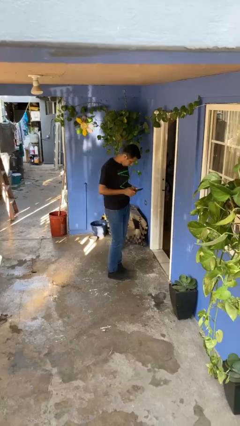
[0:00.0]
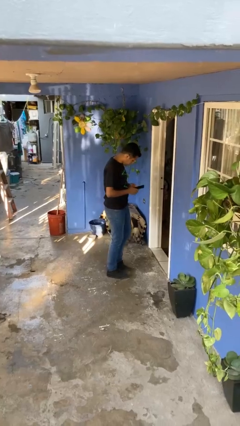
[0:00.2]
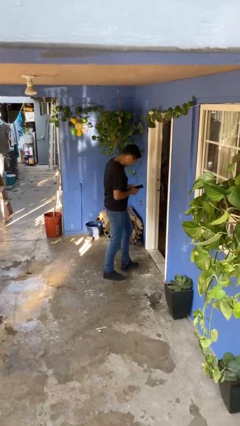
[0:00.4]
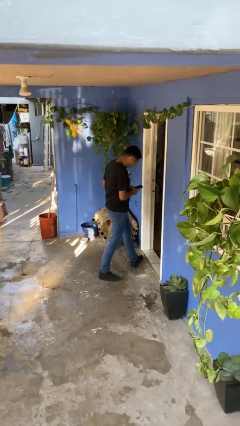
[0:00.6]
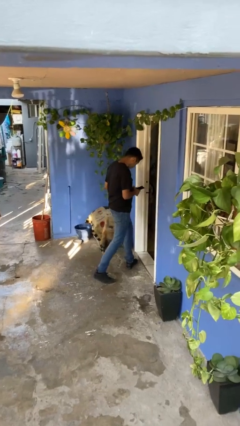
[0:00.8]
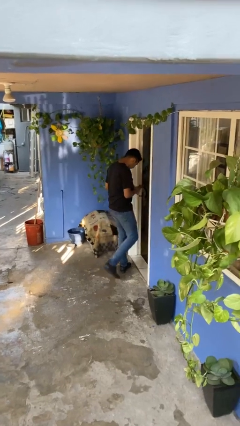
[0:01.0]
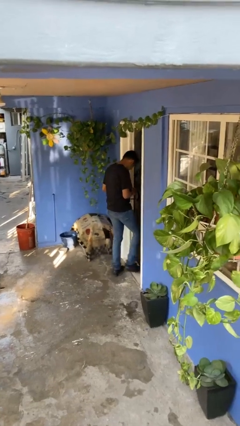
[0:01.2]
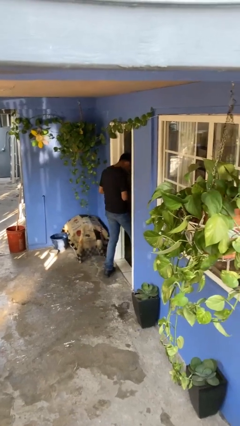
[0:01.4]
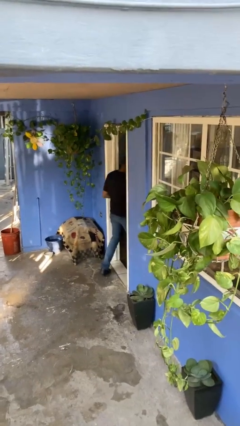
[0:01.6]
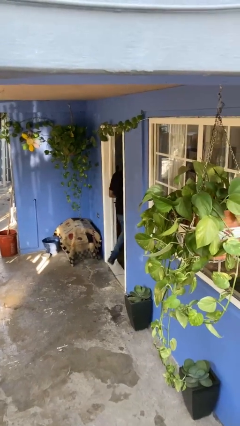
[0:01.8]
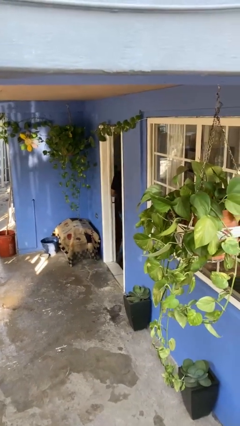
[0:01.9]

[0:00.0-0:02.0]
person exits scene through structure

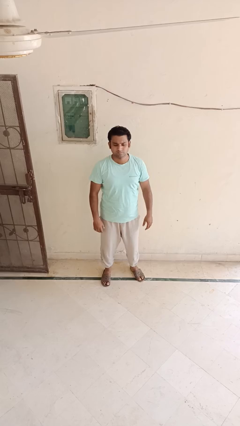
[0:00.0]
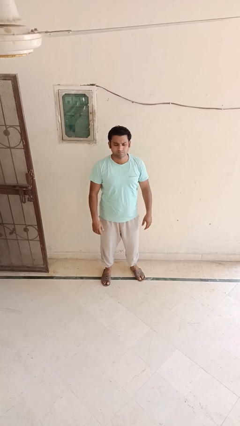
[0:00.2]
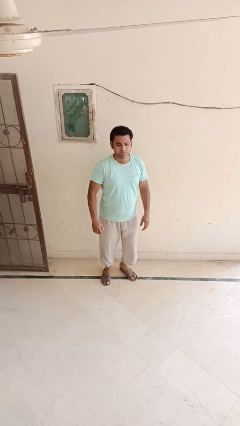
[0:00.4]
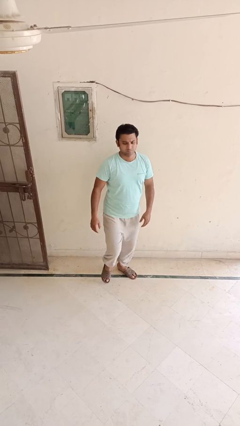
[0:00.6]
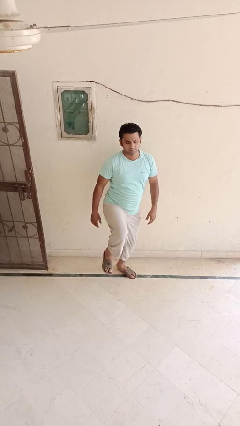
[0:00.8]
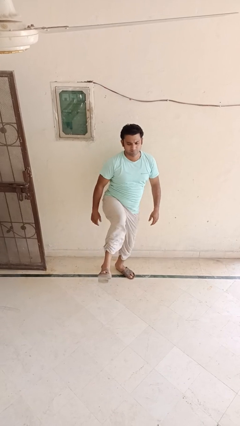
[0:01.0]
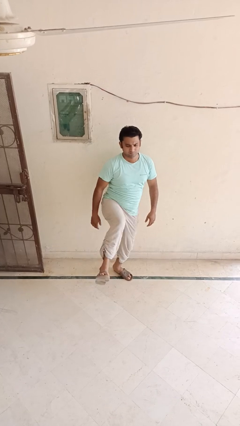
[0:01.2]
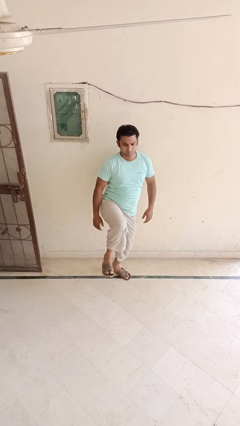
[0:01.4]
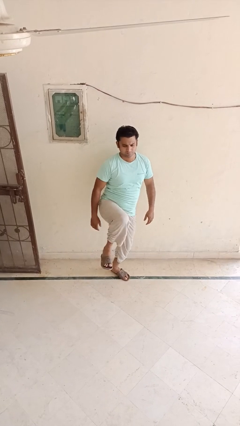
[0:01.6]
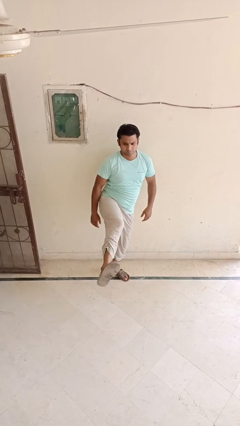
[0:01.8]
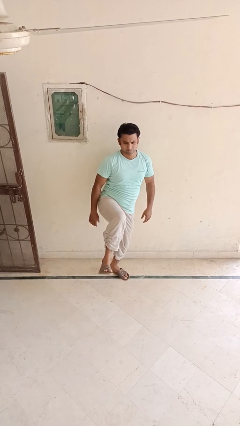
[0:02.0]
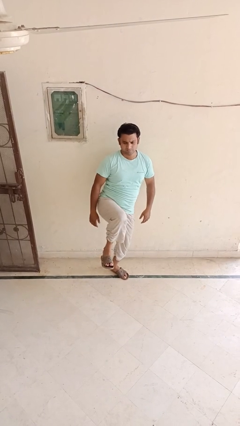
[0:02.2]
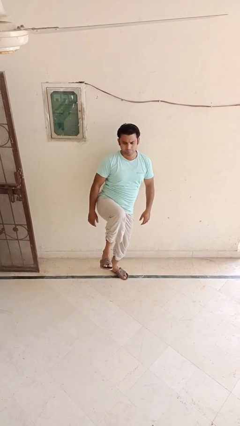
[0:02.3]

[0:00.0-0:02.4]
person karate kicks

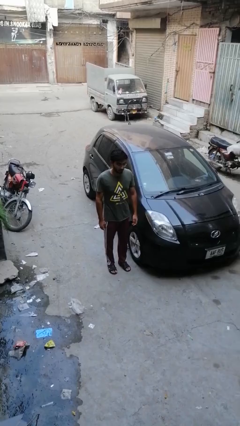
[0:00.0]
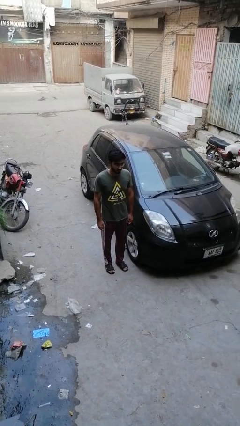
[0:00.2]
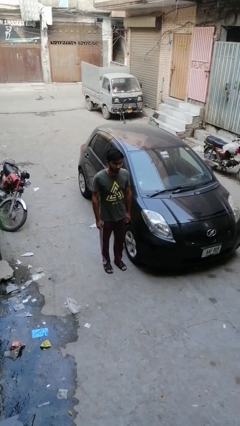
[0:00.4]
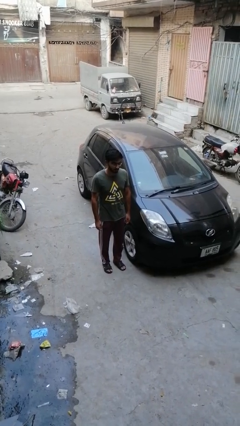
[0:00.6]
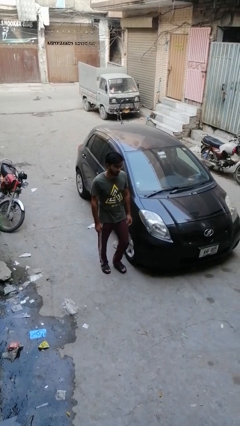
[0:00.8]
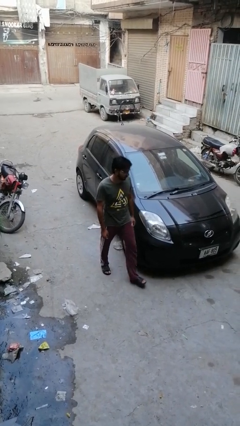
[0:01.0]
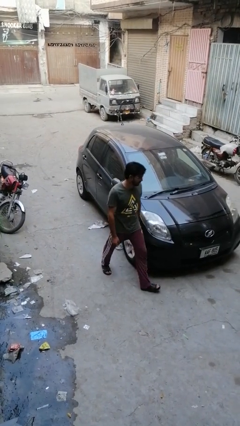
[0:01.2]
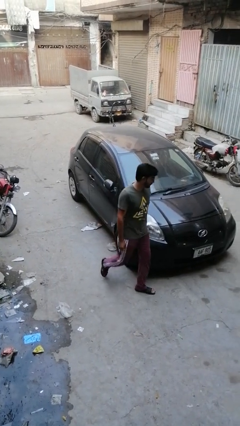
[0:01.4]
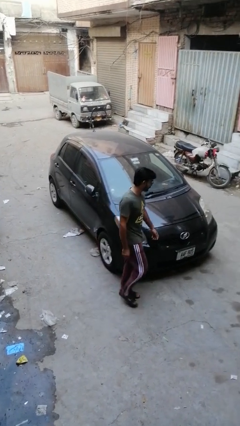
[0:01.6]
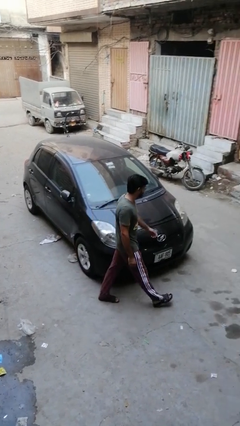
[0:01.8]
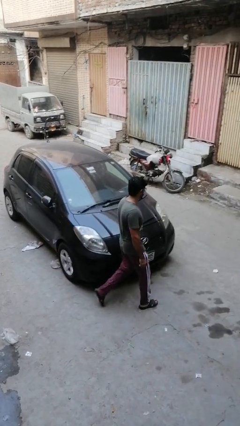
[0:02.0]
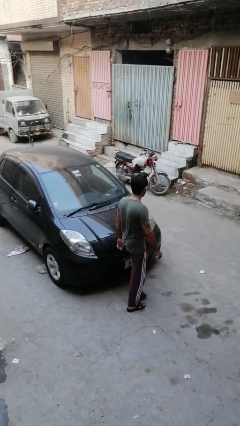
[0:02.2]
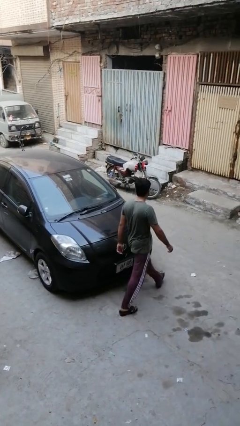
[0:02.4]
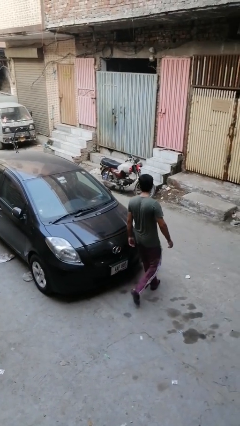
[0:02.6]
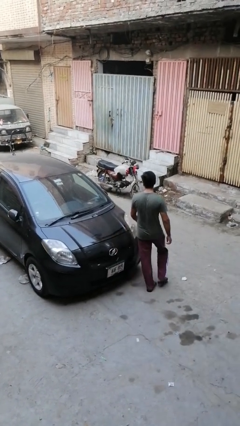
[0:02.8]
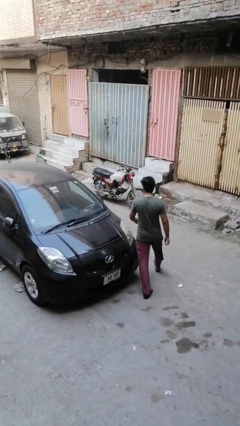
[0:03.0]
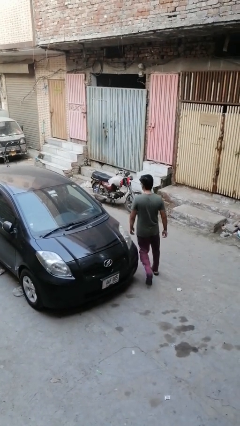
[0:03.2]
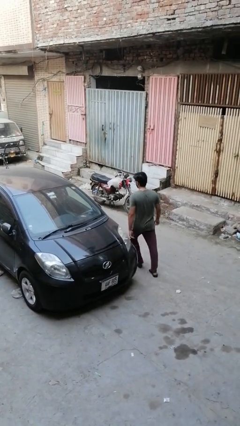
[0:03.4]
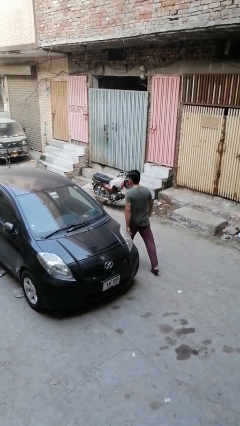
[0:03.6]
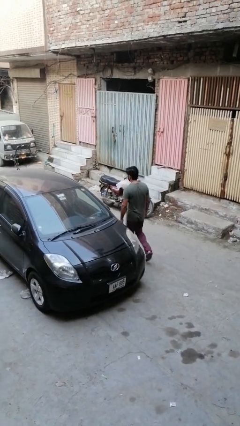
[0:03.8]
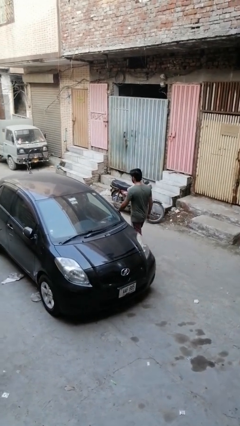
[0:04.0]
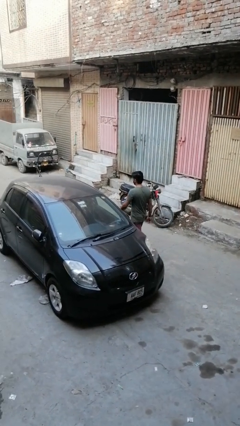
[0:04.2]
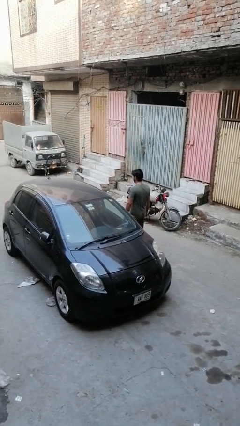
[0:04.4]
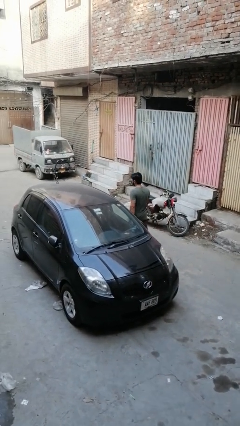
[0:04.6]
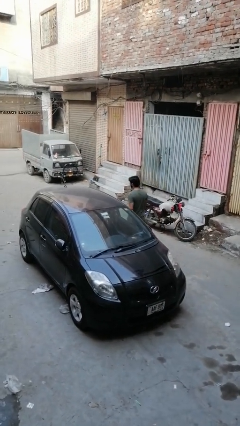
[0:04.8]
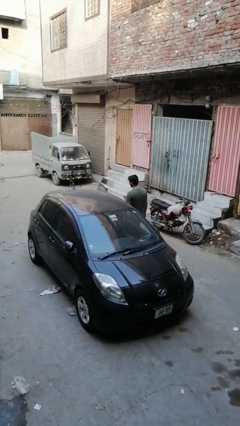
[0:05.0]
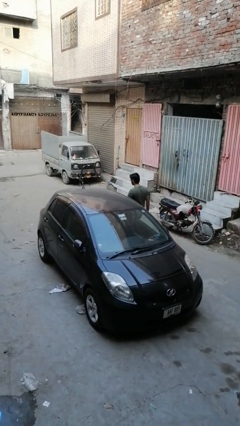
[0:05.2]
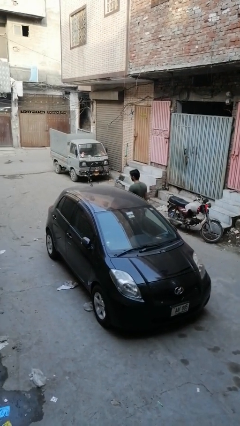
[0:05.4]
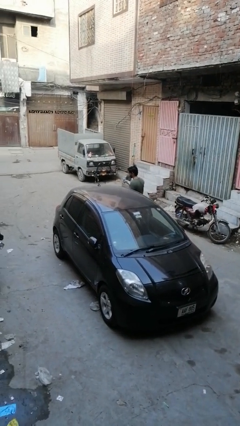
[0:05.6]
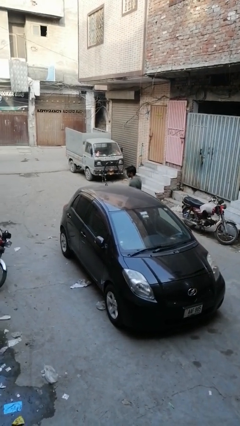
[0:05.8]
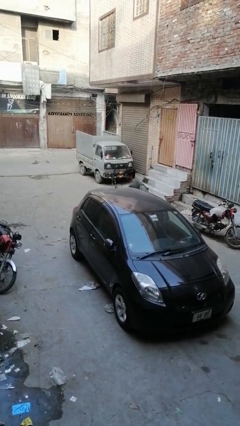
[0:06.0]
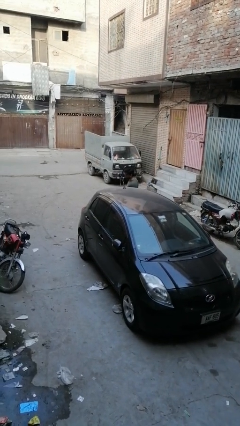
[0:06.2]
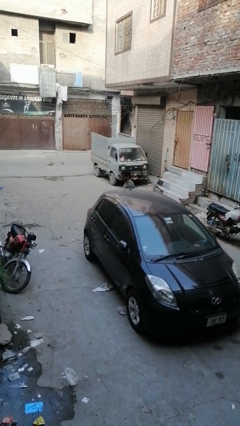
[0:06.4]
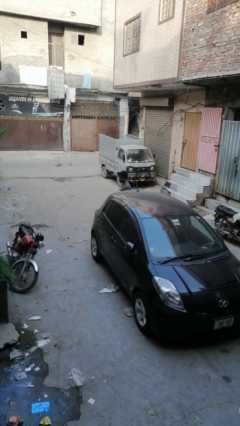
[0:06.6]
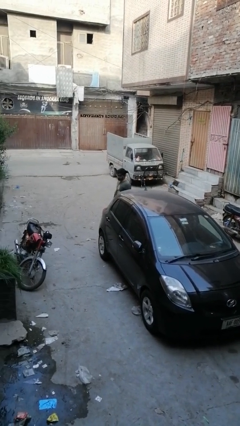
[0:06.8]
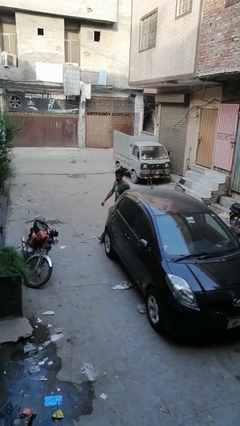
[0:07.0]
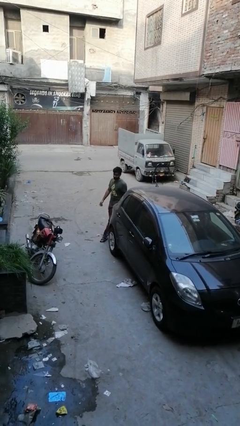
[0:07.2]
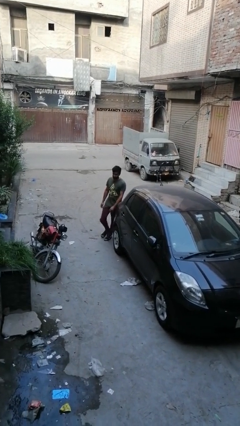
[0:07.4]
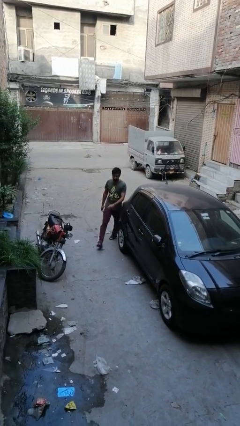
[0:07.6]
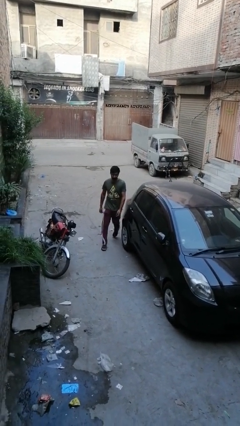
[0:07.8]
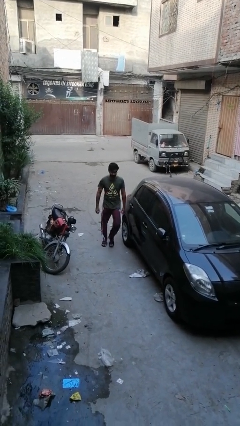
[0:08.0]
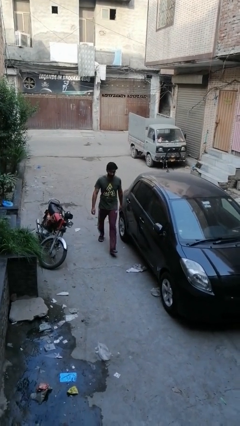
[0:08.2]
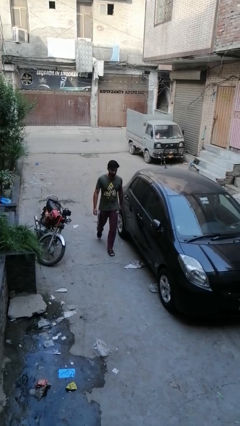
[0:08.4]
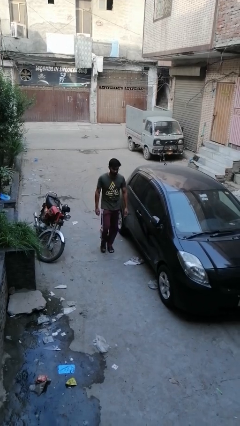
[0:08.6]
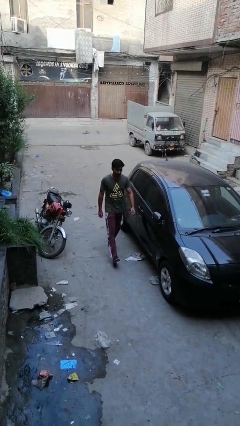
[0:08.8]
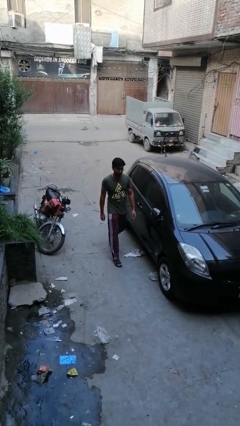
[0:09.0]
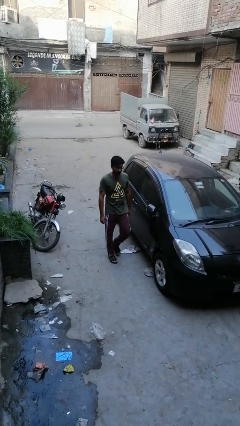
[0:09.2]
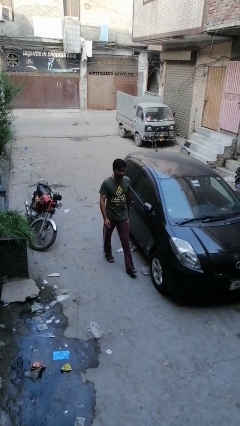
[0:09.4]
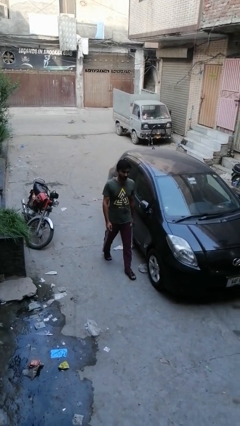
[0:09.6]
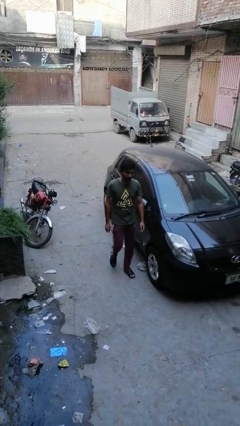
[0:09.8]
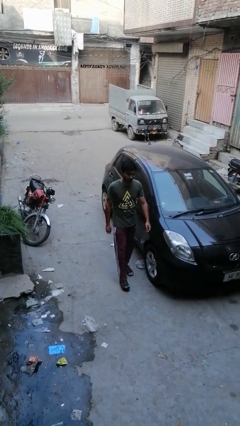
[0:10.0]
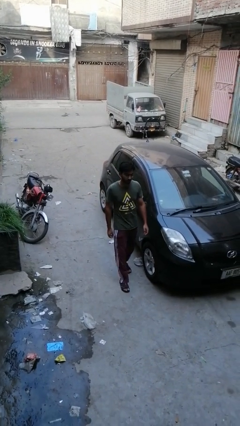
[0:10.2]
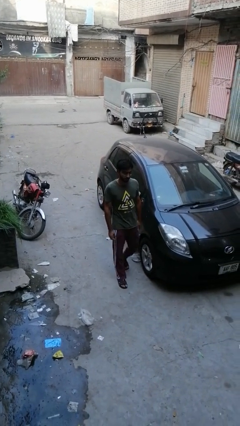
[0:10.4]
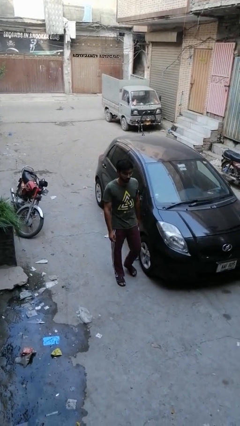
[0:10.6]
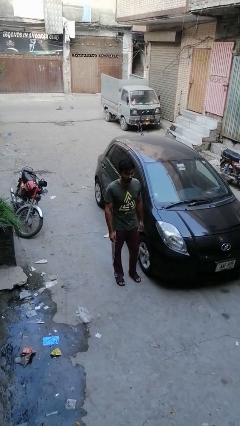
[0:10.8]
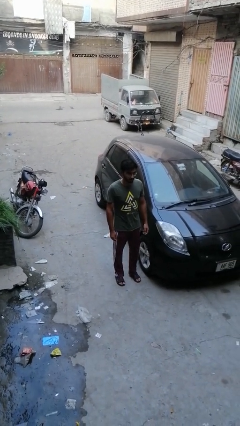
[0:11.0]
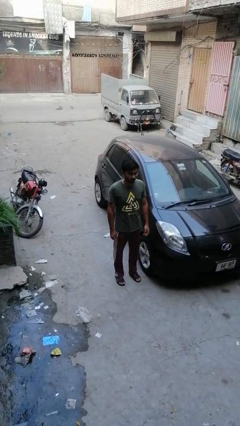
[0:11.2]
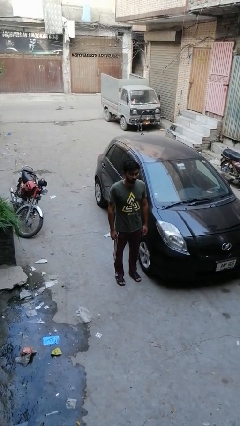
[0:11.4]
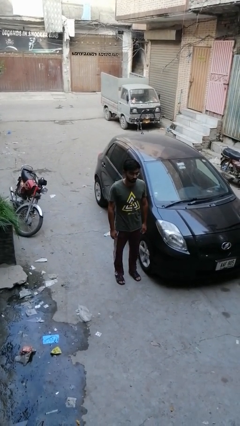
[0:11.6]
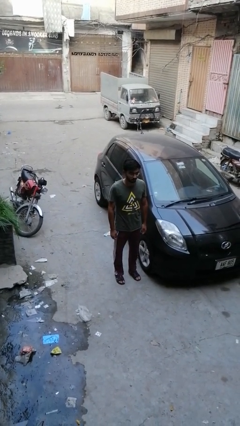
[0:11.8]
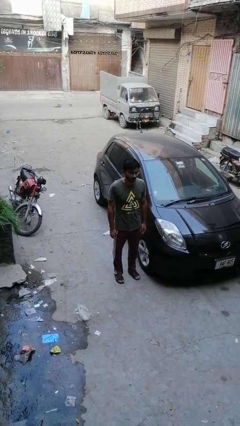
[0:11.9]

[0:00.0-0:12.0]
person walks around car

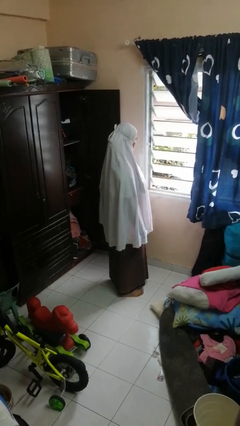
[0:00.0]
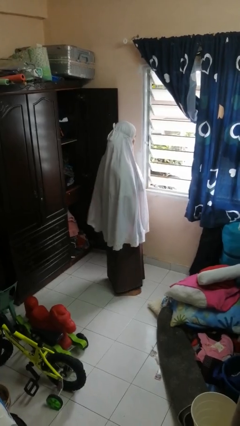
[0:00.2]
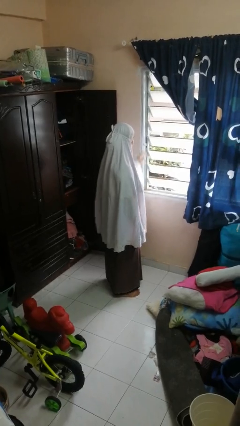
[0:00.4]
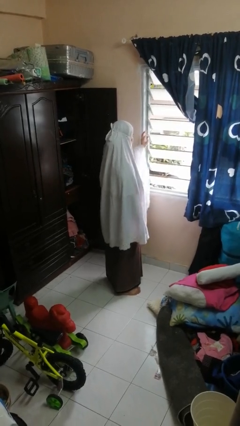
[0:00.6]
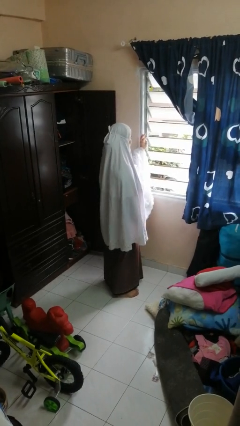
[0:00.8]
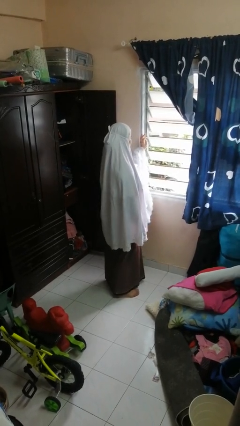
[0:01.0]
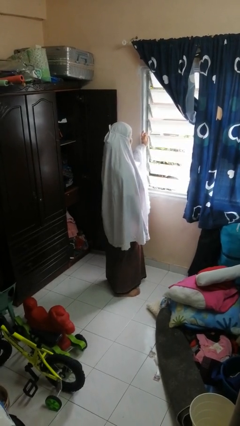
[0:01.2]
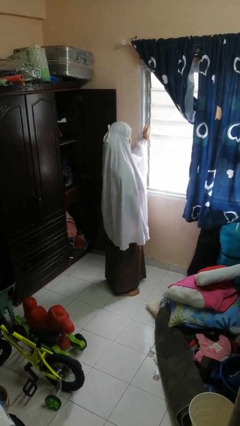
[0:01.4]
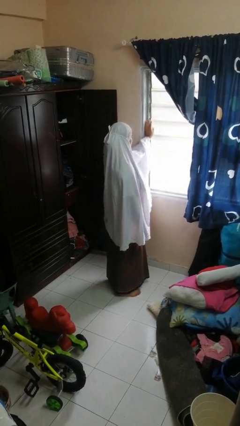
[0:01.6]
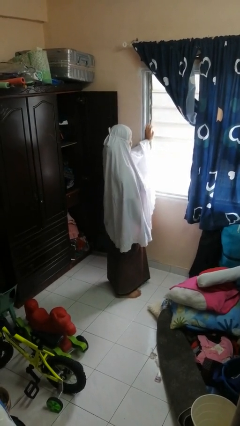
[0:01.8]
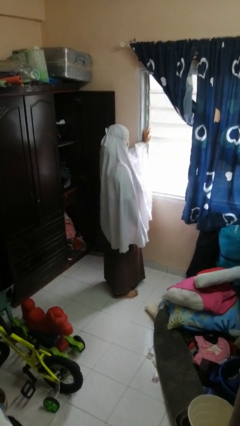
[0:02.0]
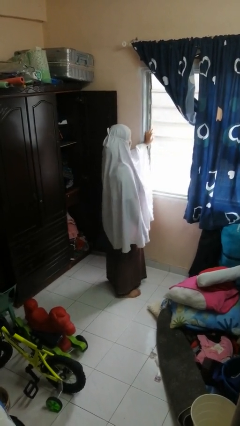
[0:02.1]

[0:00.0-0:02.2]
person closes home window
